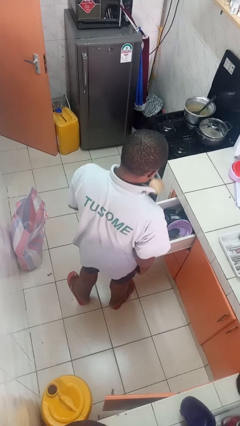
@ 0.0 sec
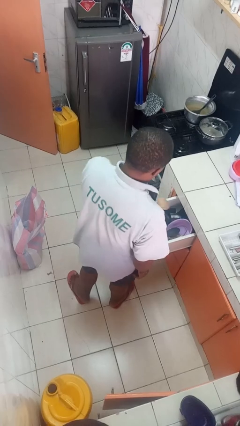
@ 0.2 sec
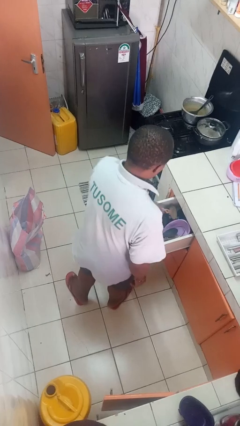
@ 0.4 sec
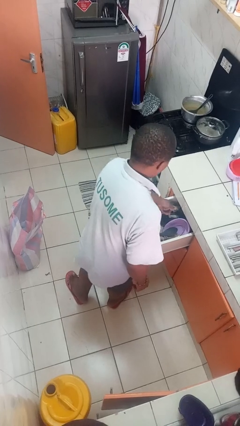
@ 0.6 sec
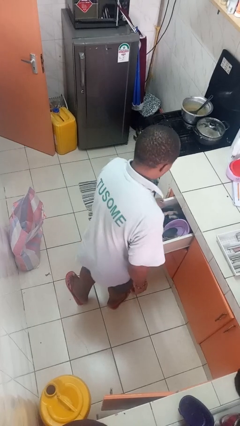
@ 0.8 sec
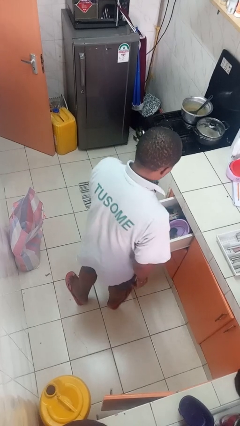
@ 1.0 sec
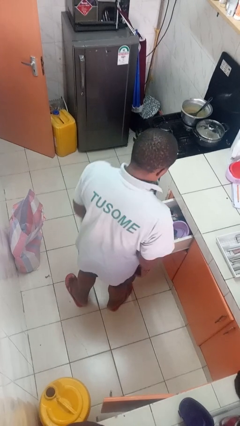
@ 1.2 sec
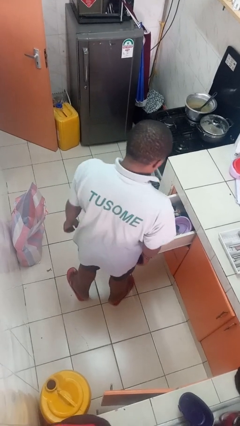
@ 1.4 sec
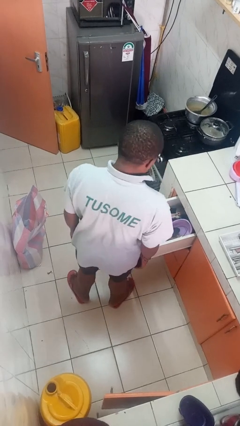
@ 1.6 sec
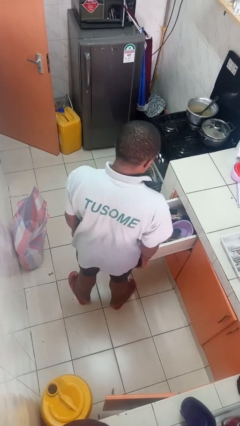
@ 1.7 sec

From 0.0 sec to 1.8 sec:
person puts object into kitchen drawer

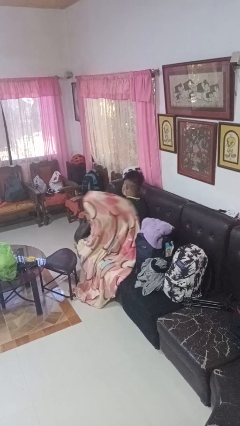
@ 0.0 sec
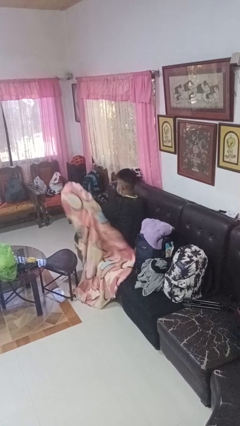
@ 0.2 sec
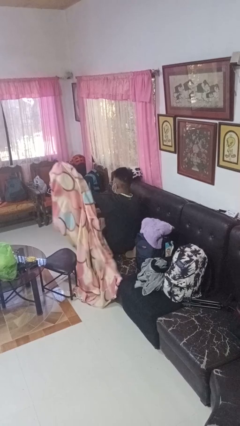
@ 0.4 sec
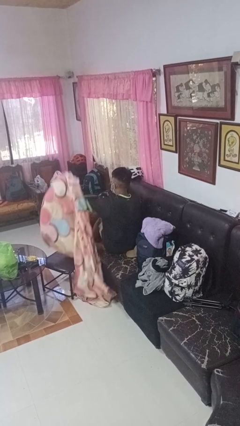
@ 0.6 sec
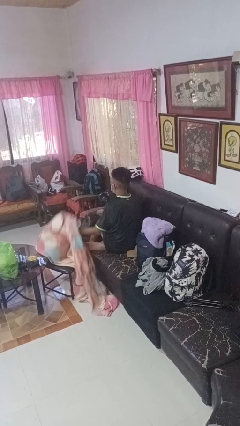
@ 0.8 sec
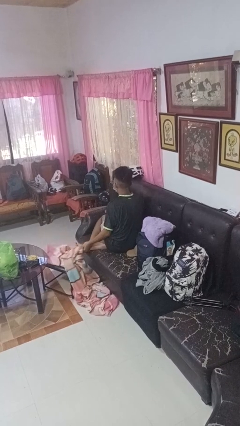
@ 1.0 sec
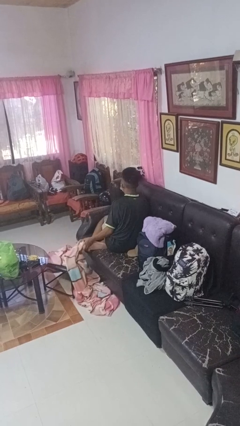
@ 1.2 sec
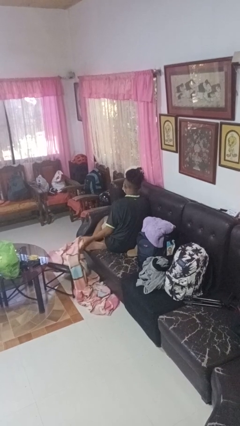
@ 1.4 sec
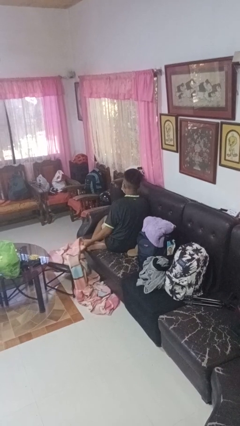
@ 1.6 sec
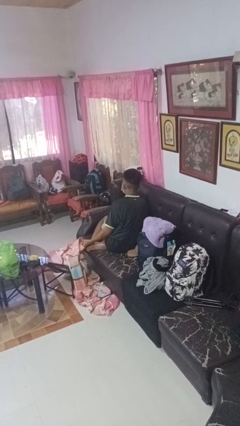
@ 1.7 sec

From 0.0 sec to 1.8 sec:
person uncovers with blanket

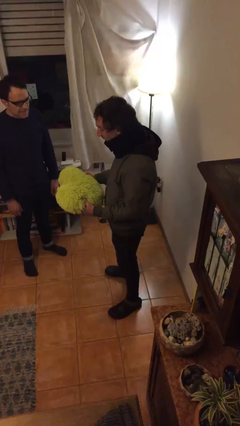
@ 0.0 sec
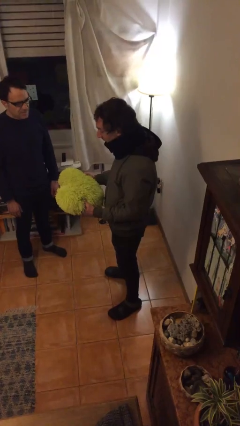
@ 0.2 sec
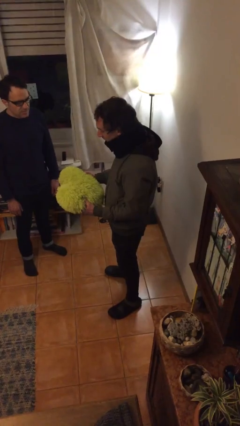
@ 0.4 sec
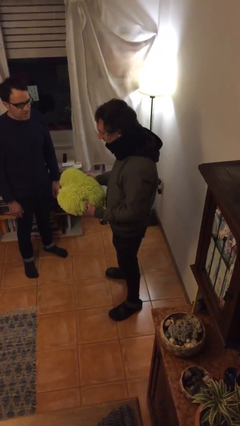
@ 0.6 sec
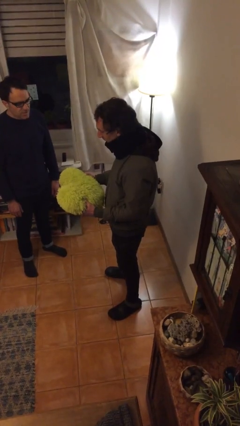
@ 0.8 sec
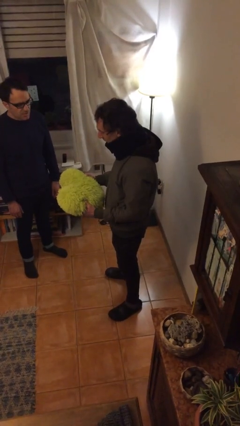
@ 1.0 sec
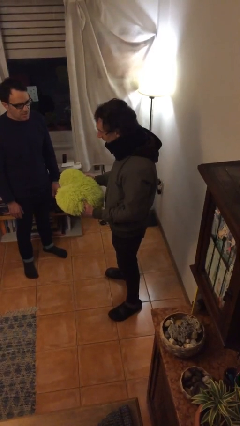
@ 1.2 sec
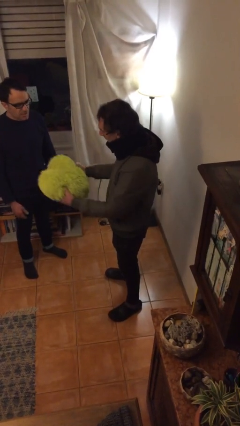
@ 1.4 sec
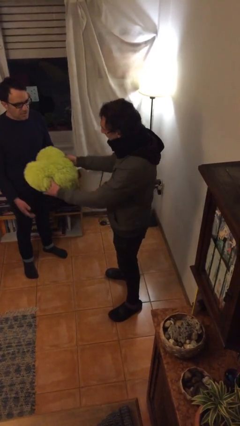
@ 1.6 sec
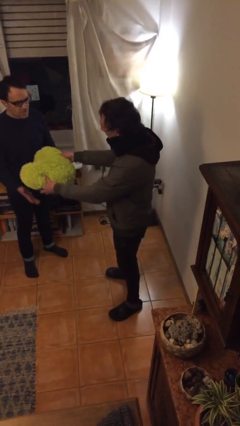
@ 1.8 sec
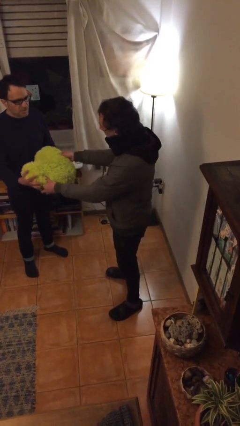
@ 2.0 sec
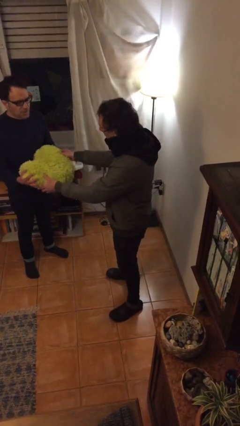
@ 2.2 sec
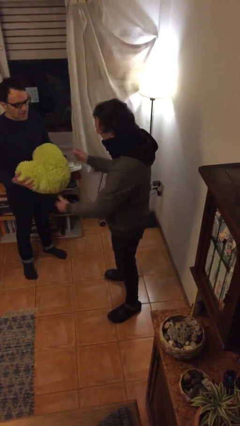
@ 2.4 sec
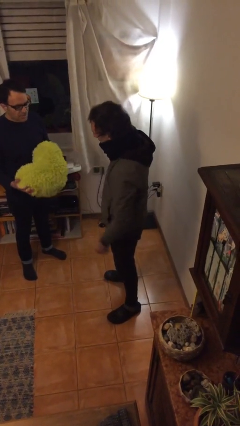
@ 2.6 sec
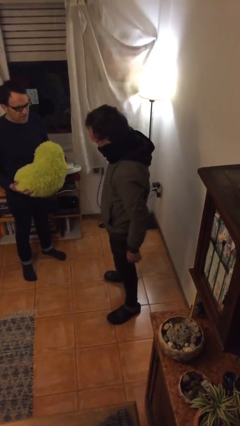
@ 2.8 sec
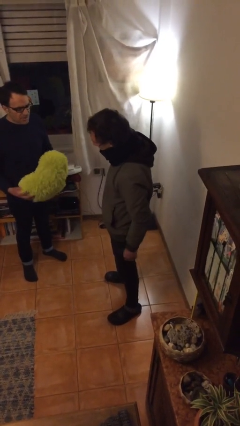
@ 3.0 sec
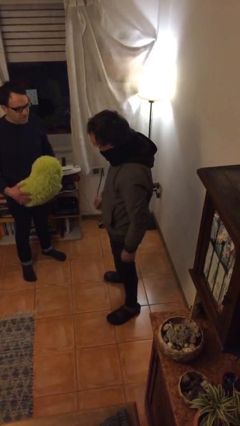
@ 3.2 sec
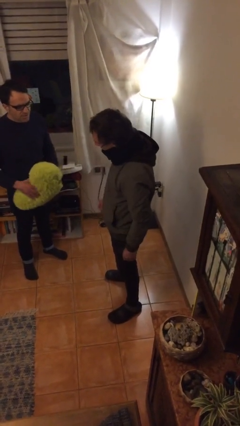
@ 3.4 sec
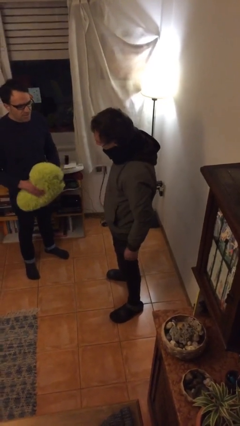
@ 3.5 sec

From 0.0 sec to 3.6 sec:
person transfers object to person

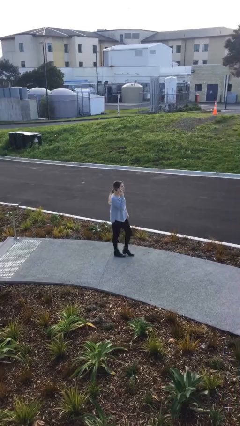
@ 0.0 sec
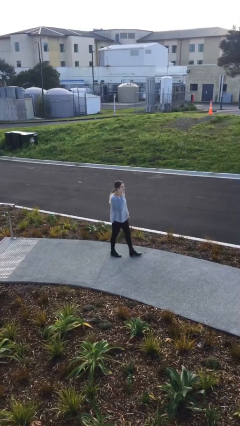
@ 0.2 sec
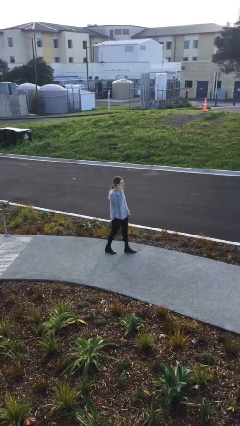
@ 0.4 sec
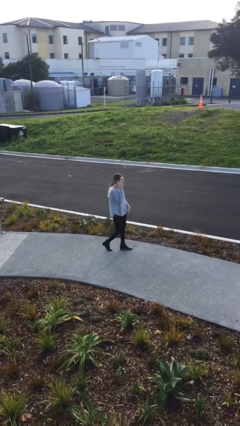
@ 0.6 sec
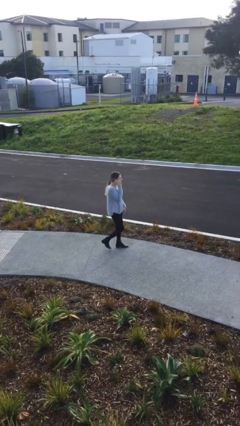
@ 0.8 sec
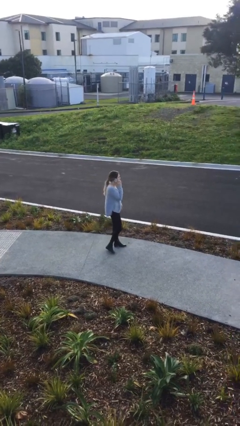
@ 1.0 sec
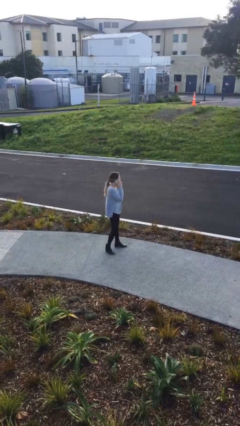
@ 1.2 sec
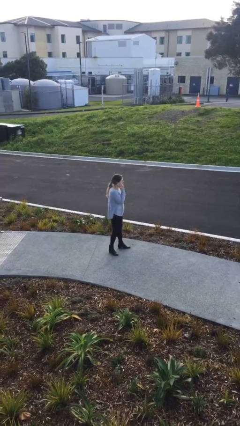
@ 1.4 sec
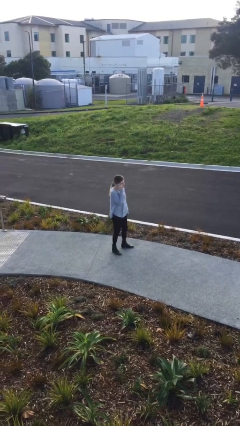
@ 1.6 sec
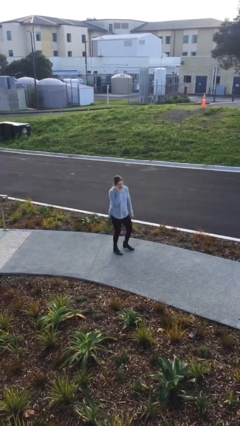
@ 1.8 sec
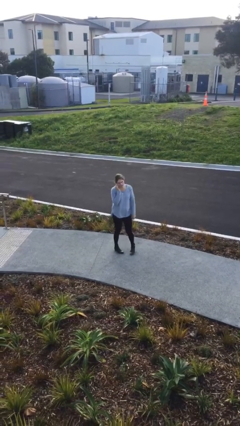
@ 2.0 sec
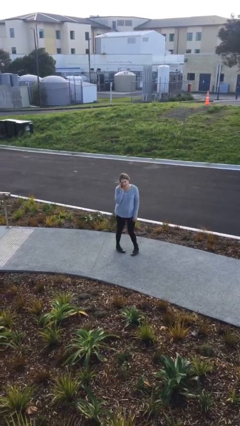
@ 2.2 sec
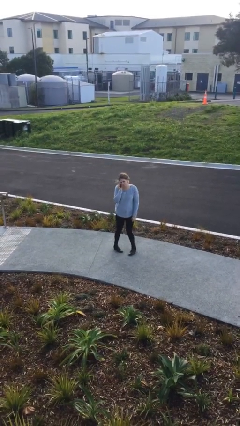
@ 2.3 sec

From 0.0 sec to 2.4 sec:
person talks on phone

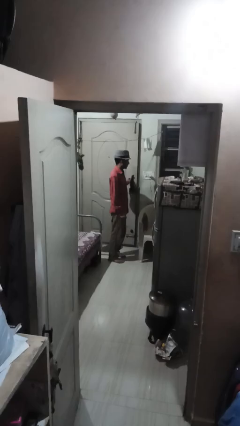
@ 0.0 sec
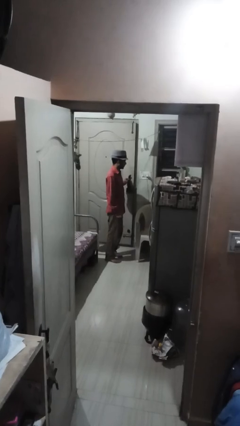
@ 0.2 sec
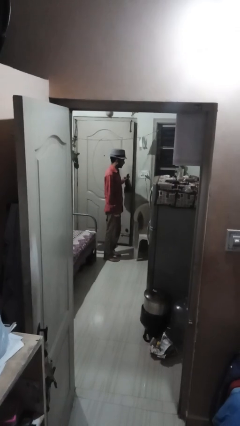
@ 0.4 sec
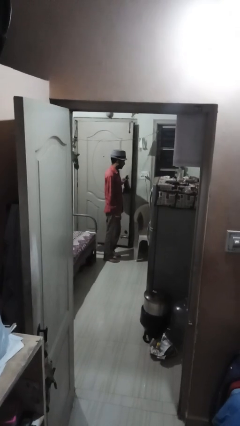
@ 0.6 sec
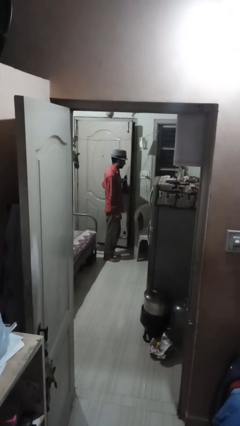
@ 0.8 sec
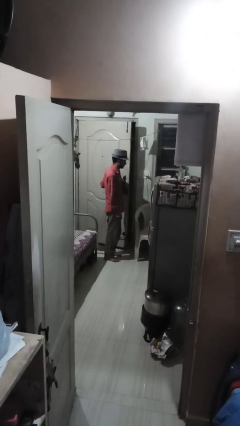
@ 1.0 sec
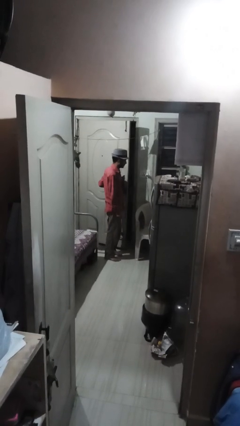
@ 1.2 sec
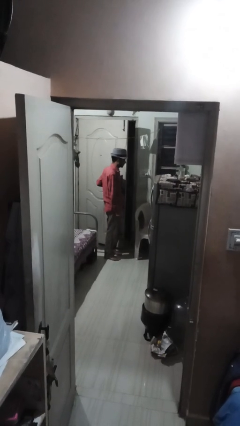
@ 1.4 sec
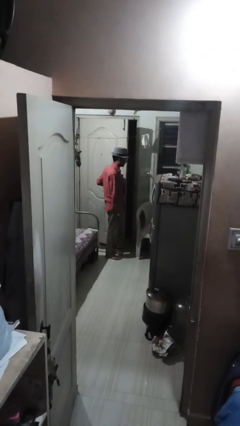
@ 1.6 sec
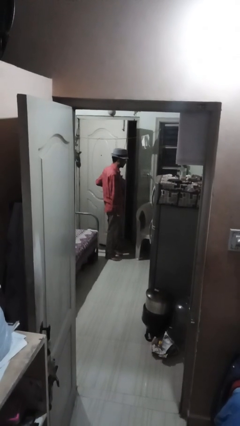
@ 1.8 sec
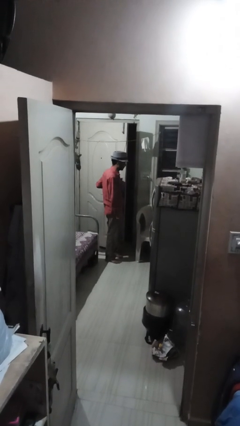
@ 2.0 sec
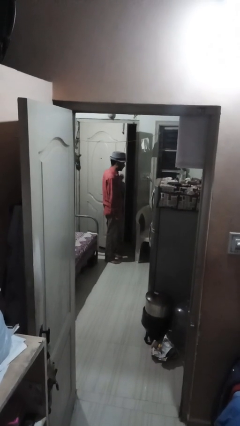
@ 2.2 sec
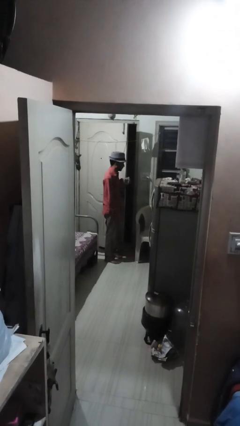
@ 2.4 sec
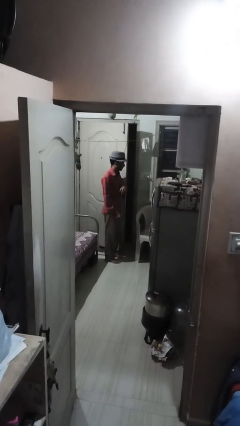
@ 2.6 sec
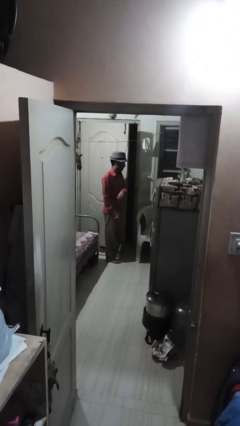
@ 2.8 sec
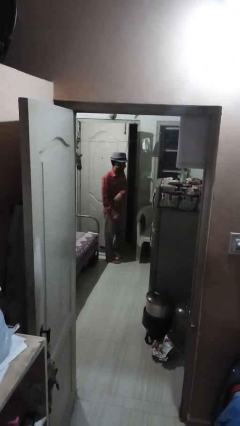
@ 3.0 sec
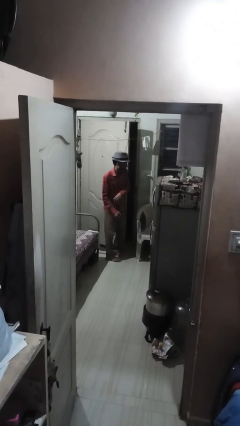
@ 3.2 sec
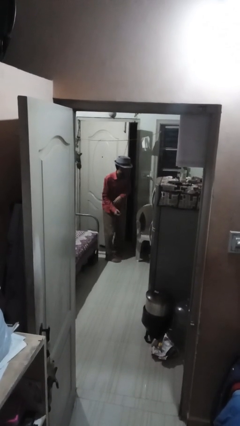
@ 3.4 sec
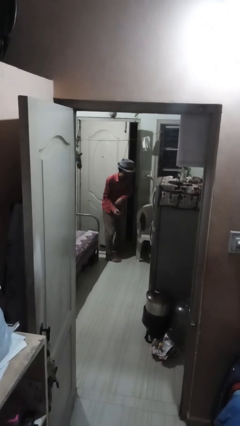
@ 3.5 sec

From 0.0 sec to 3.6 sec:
person opens facility door

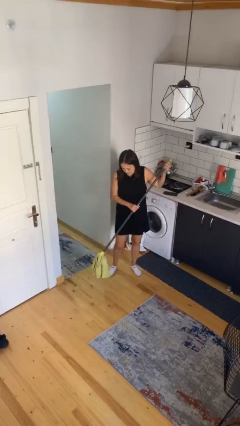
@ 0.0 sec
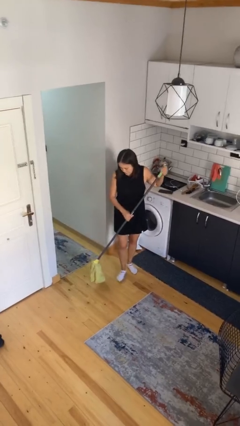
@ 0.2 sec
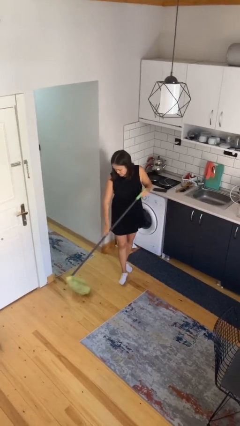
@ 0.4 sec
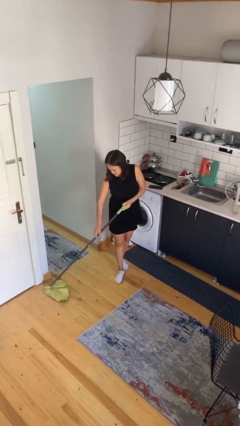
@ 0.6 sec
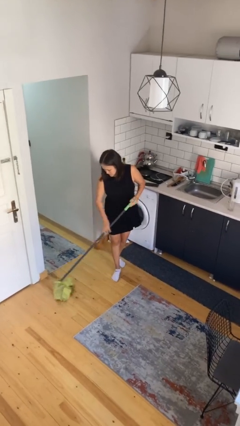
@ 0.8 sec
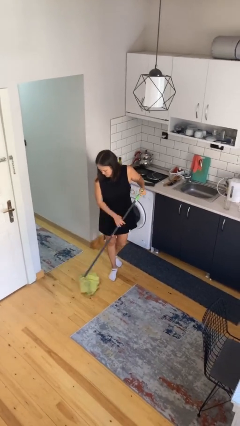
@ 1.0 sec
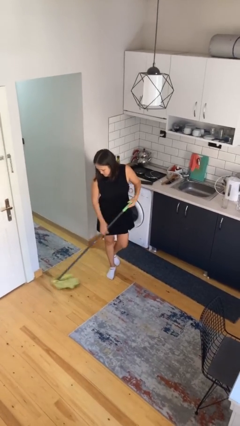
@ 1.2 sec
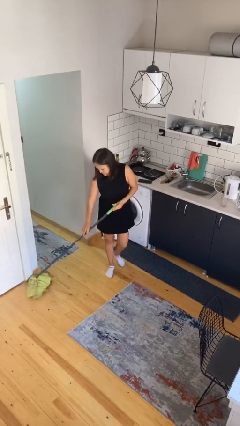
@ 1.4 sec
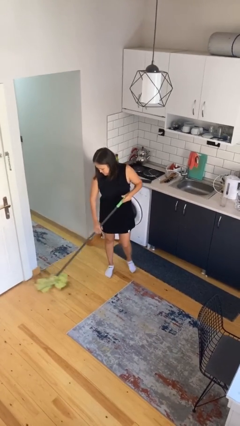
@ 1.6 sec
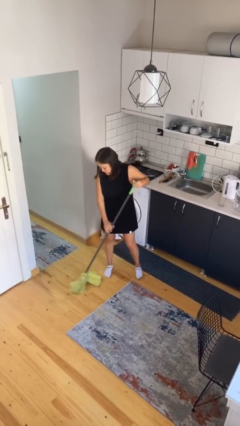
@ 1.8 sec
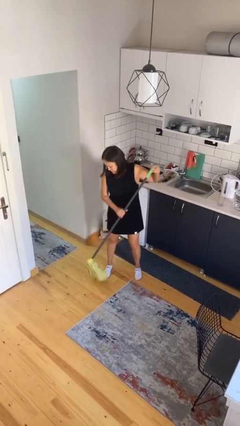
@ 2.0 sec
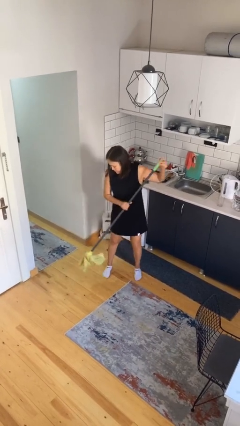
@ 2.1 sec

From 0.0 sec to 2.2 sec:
person sweeps floor

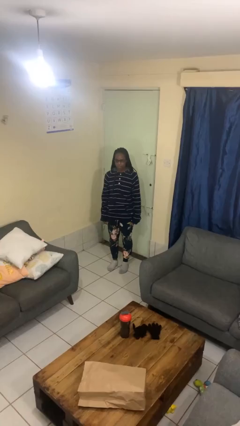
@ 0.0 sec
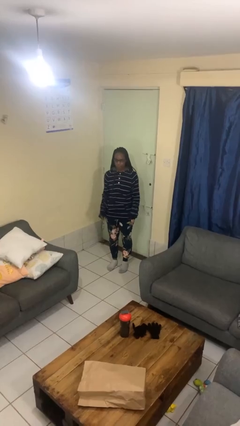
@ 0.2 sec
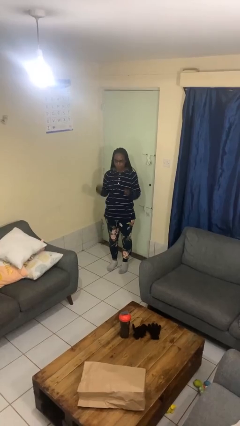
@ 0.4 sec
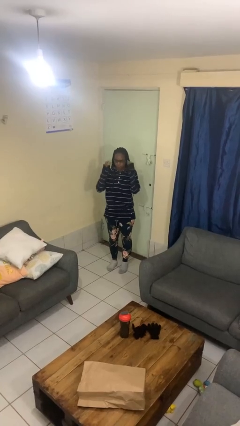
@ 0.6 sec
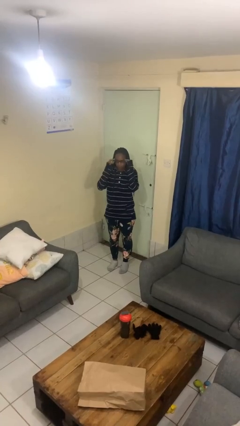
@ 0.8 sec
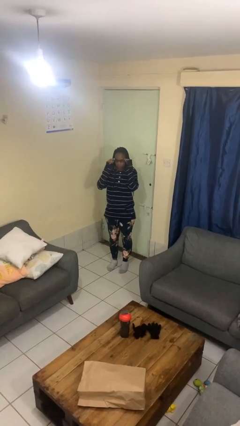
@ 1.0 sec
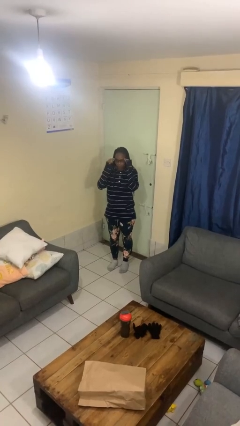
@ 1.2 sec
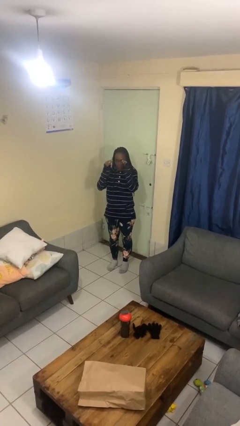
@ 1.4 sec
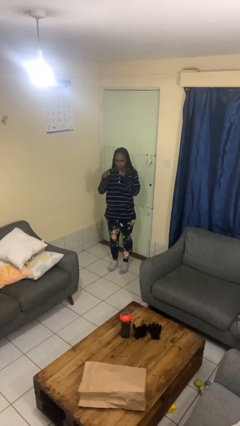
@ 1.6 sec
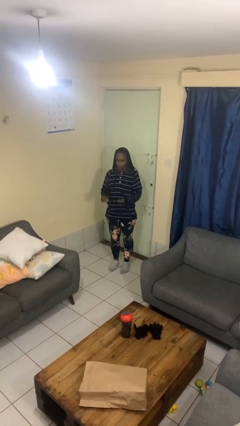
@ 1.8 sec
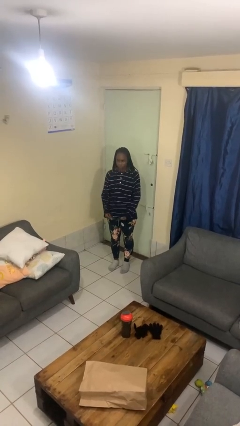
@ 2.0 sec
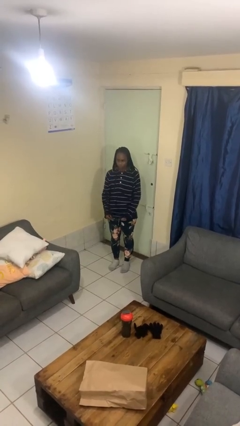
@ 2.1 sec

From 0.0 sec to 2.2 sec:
person takes off glasses
